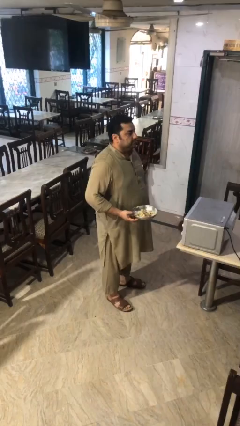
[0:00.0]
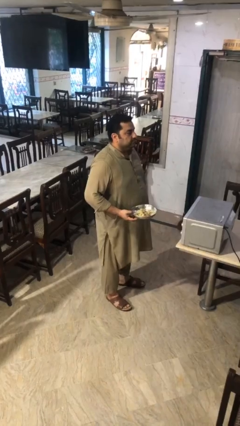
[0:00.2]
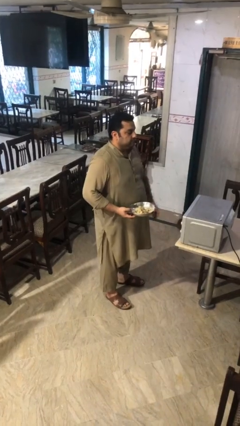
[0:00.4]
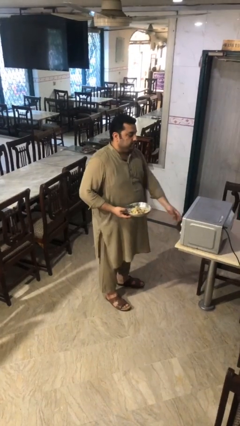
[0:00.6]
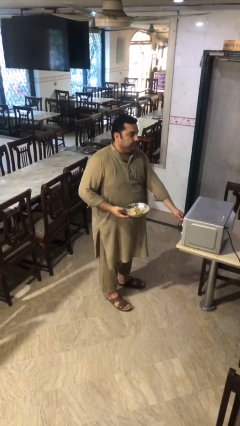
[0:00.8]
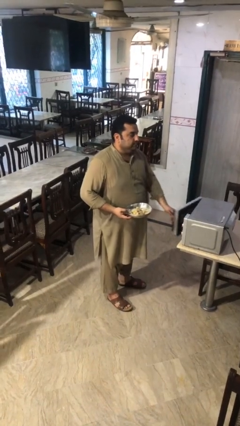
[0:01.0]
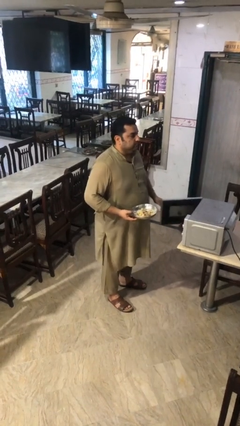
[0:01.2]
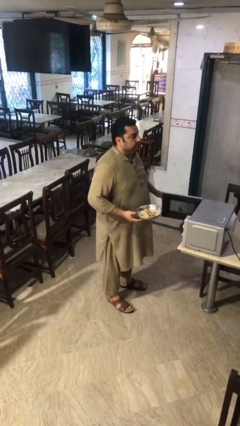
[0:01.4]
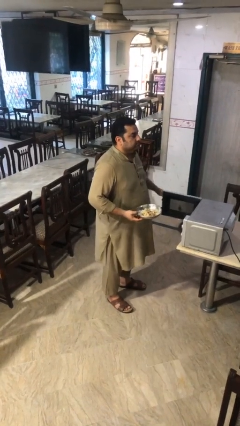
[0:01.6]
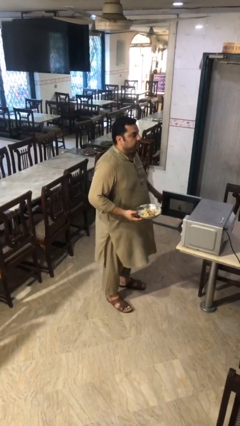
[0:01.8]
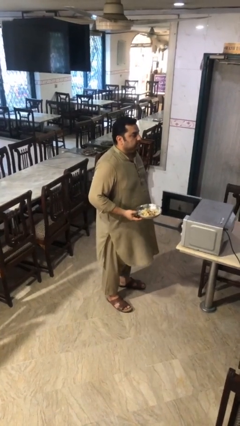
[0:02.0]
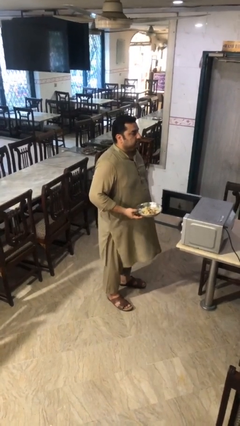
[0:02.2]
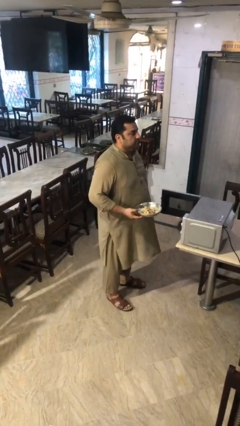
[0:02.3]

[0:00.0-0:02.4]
person opens microwave

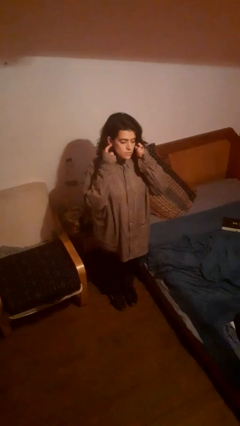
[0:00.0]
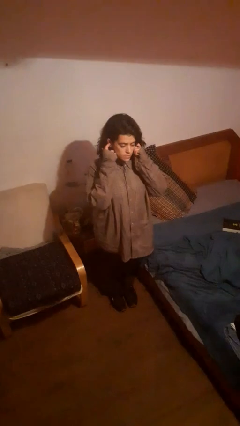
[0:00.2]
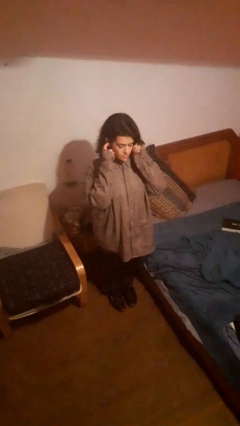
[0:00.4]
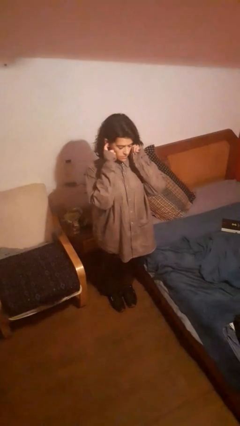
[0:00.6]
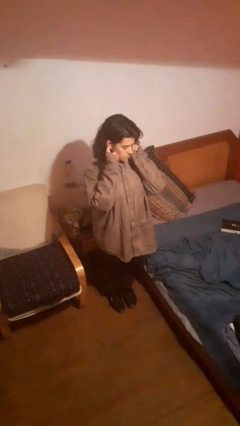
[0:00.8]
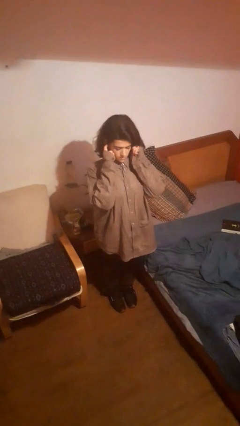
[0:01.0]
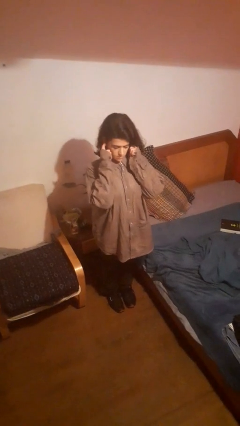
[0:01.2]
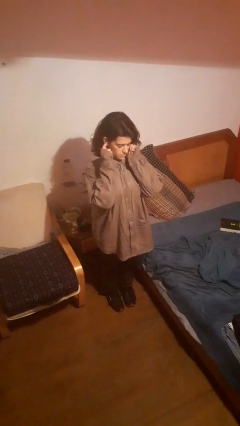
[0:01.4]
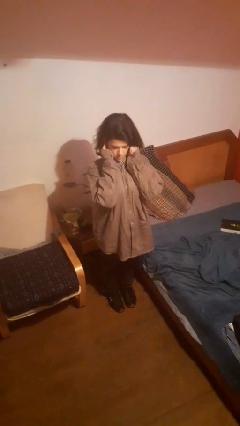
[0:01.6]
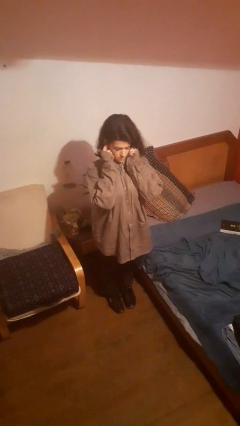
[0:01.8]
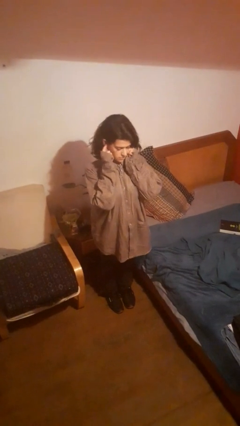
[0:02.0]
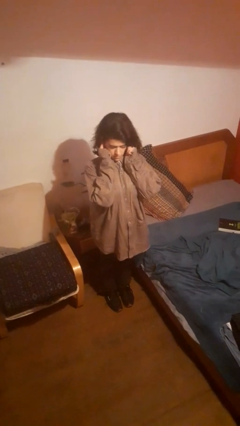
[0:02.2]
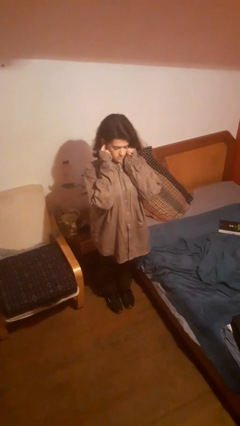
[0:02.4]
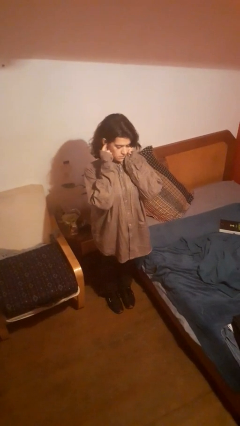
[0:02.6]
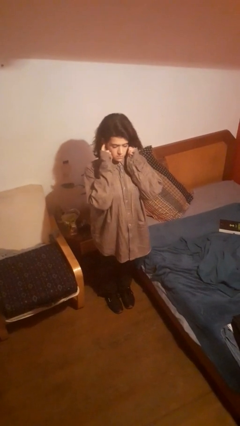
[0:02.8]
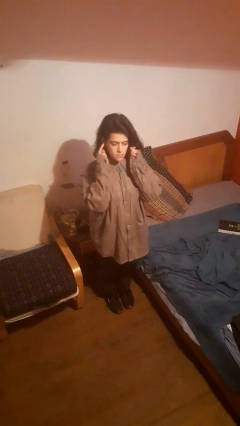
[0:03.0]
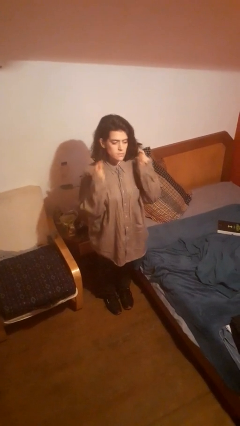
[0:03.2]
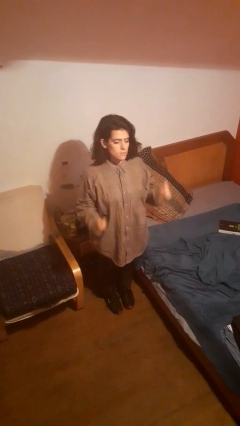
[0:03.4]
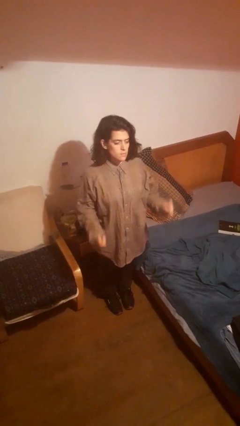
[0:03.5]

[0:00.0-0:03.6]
person puts fingers in ear

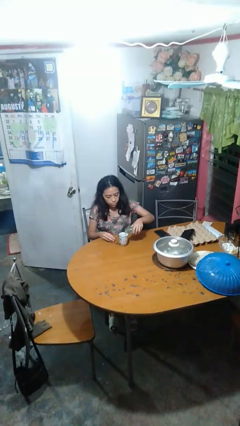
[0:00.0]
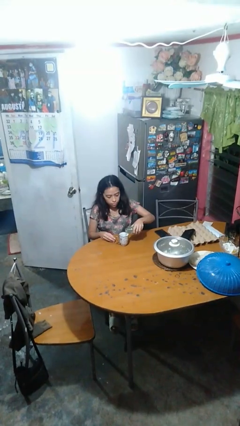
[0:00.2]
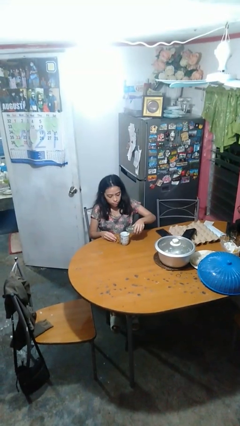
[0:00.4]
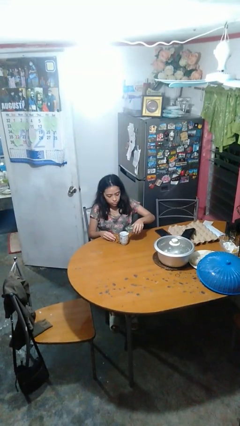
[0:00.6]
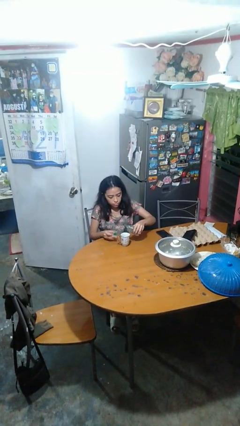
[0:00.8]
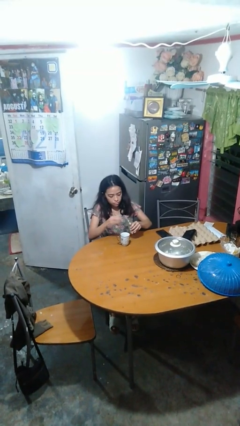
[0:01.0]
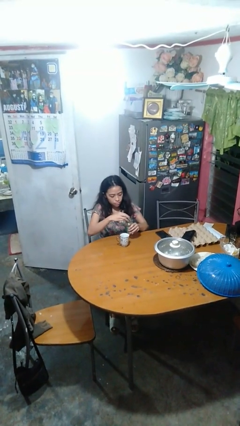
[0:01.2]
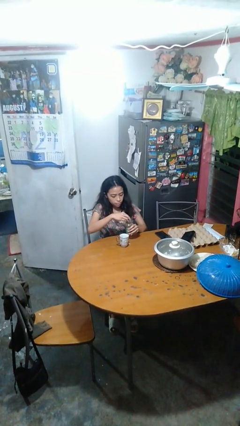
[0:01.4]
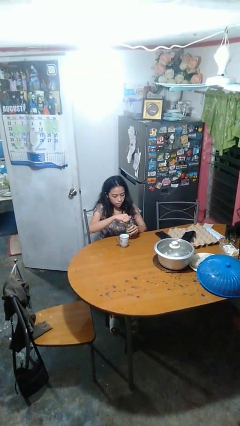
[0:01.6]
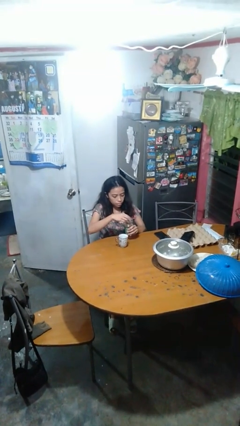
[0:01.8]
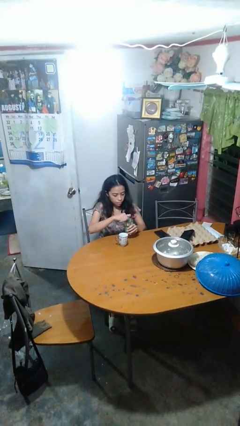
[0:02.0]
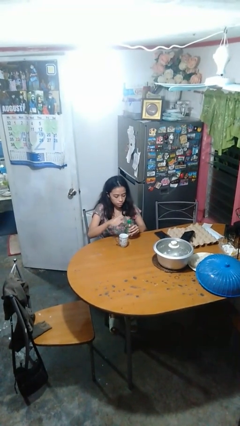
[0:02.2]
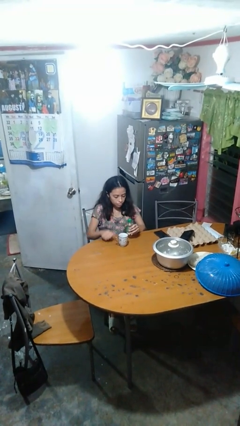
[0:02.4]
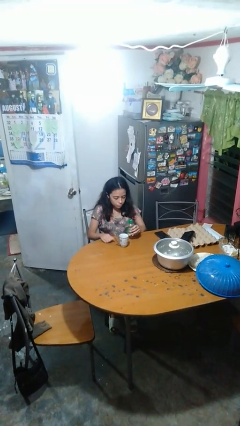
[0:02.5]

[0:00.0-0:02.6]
person screws lid to bottle

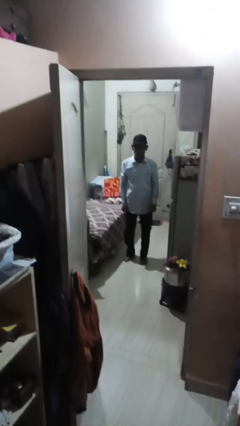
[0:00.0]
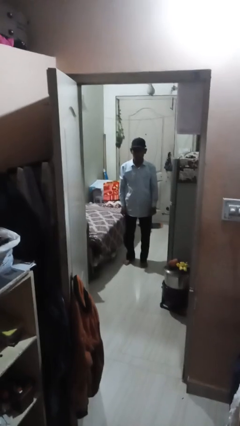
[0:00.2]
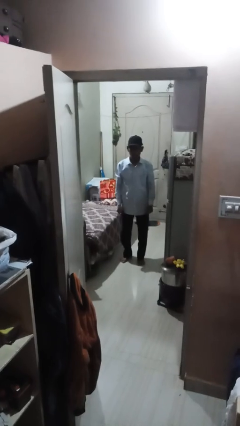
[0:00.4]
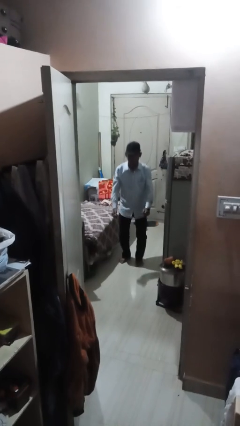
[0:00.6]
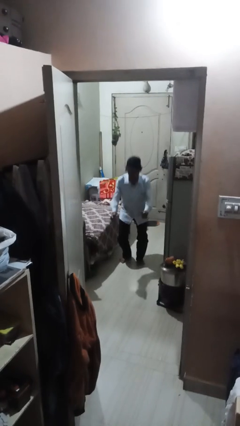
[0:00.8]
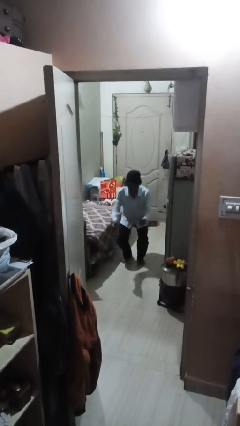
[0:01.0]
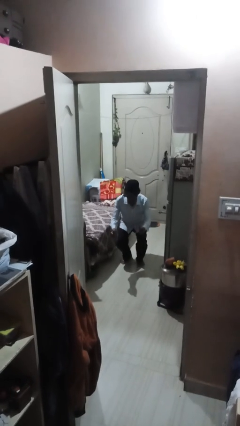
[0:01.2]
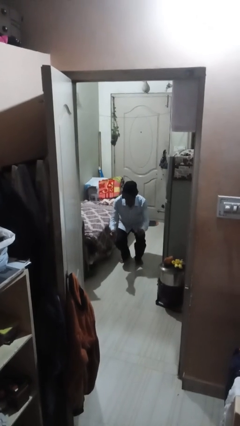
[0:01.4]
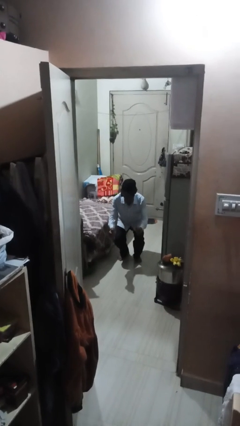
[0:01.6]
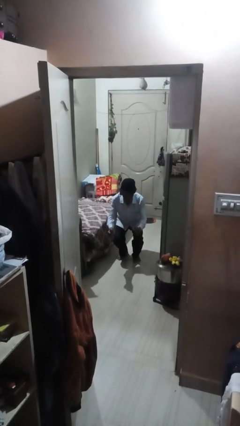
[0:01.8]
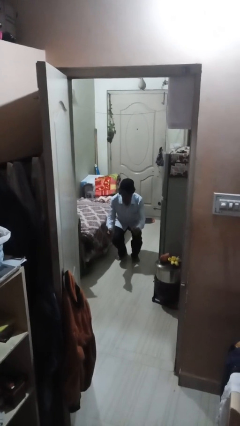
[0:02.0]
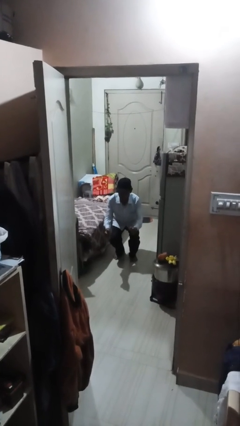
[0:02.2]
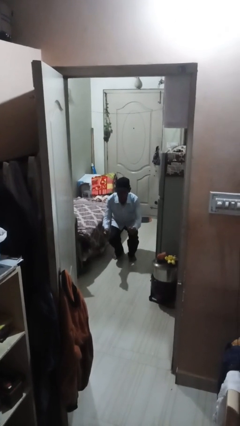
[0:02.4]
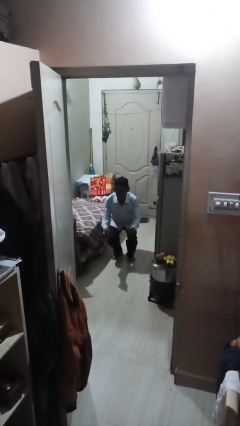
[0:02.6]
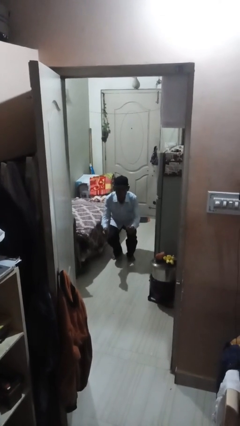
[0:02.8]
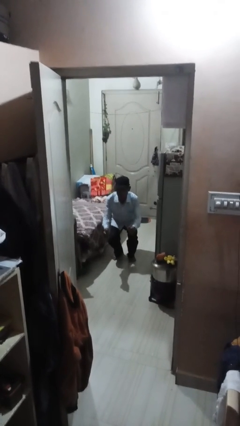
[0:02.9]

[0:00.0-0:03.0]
person squats

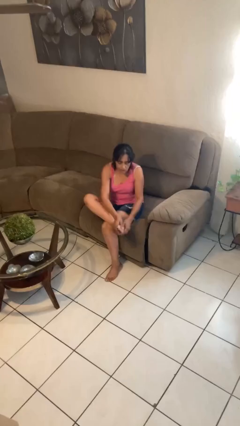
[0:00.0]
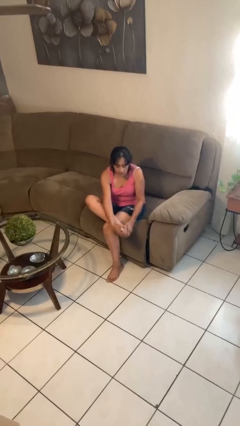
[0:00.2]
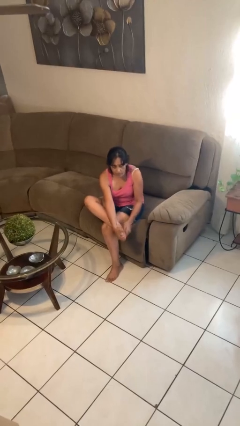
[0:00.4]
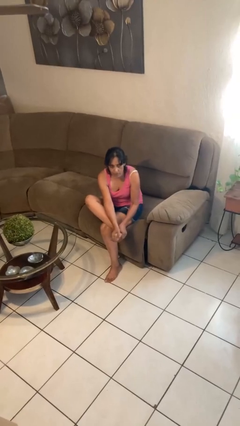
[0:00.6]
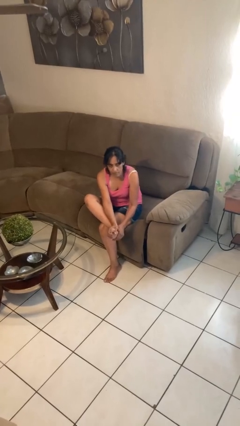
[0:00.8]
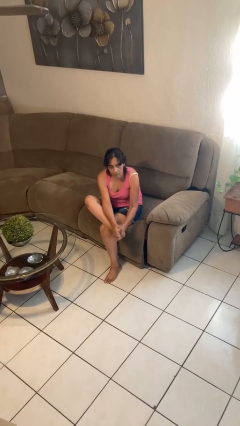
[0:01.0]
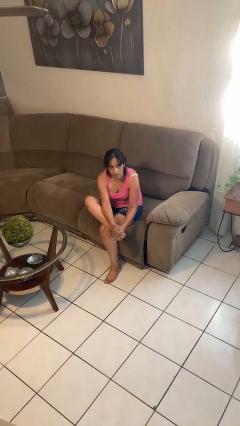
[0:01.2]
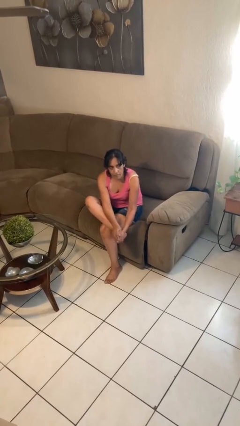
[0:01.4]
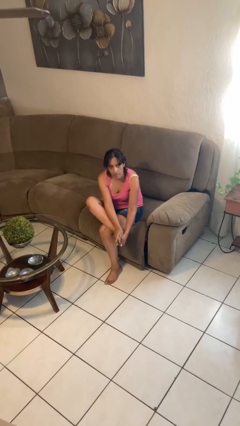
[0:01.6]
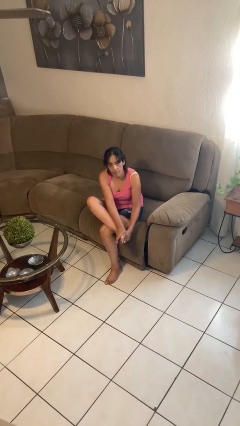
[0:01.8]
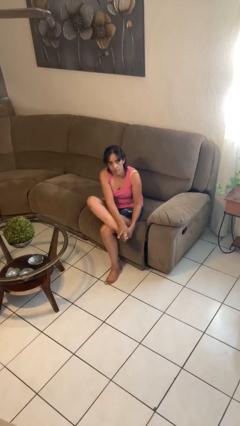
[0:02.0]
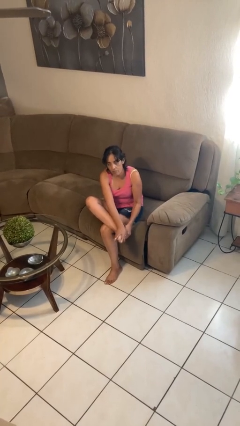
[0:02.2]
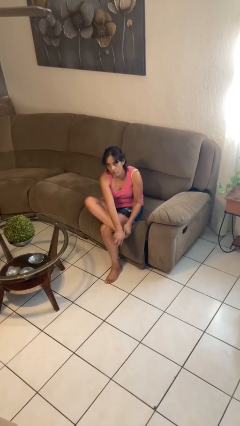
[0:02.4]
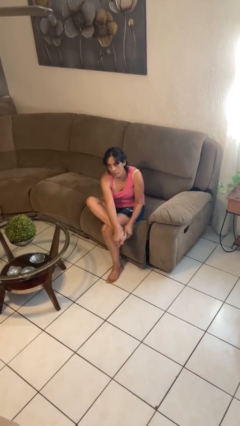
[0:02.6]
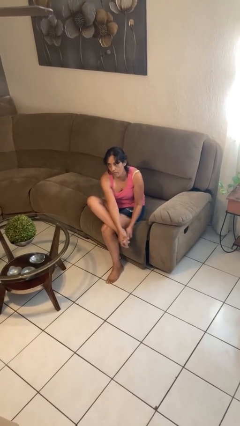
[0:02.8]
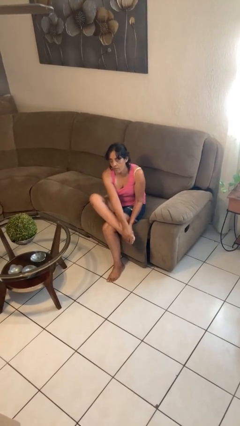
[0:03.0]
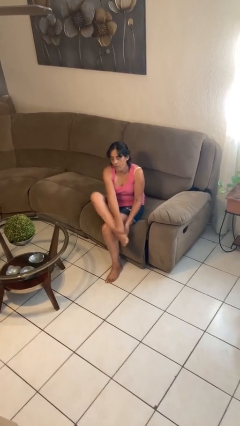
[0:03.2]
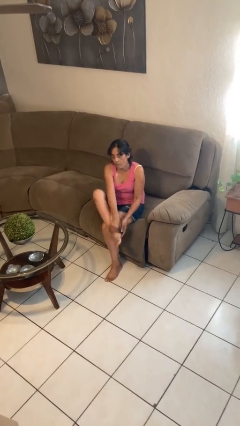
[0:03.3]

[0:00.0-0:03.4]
person rubs foot

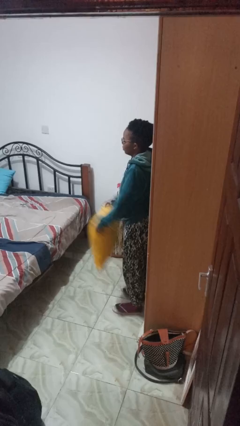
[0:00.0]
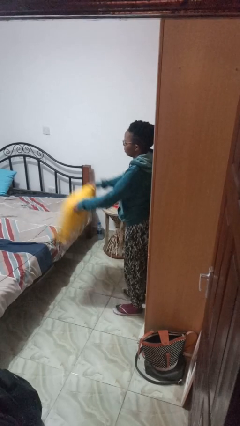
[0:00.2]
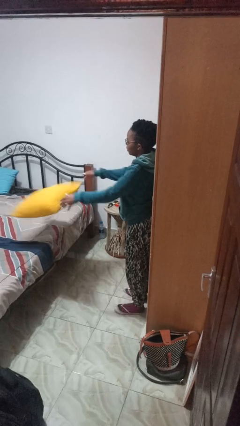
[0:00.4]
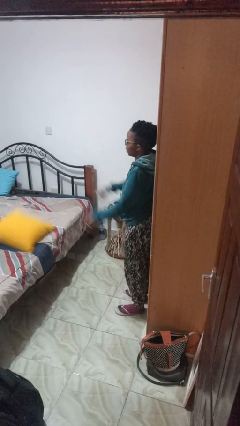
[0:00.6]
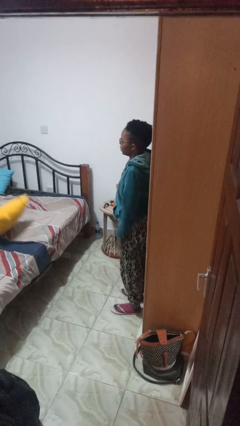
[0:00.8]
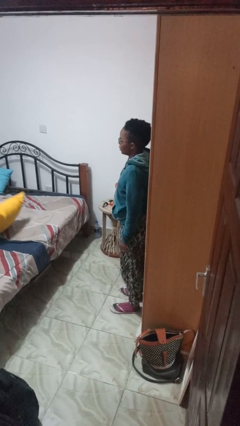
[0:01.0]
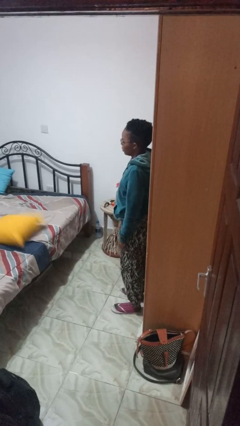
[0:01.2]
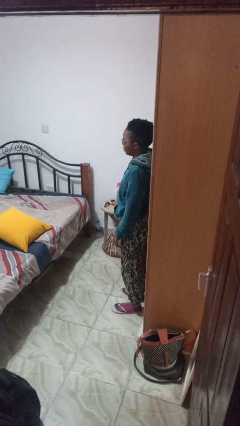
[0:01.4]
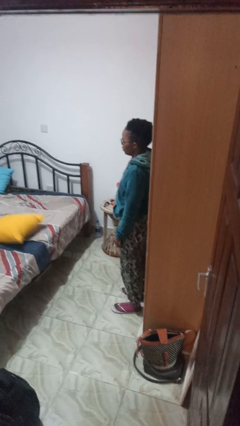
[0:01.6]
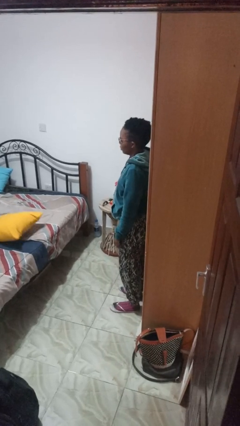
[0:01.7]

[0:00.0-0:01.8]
person throws object on bed

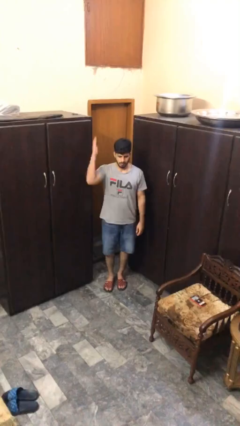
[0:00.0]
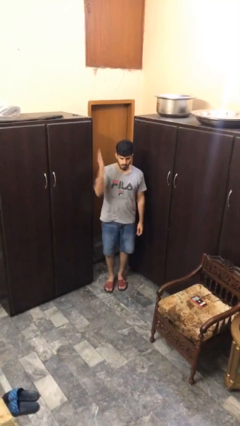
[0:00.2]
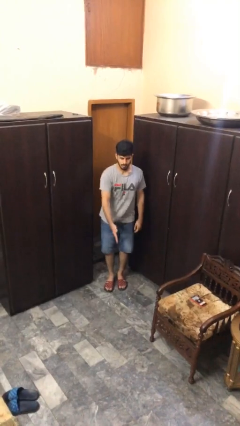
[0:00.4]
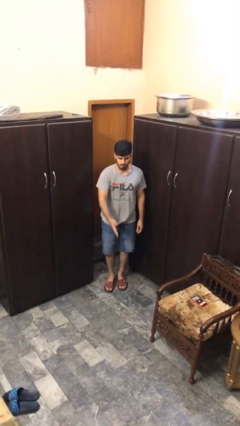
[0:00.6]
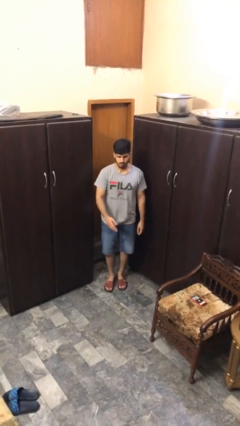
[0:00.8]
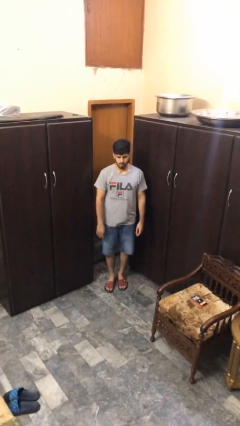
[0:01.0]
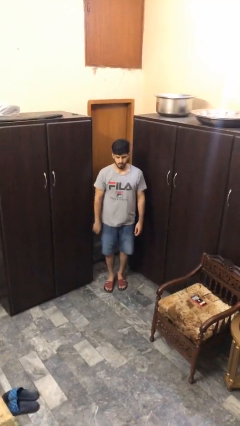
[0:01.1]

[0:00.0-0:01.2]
person karate chop
